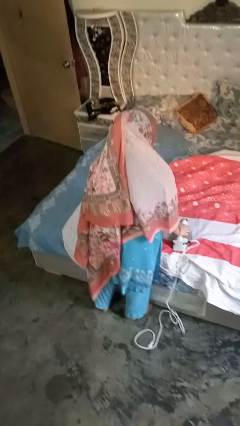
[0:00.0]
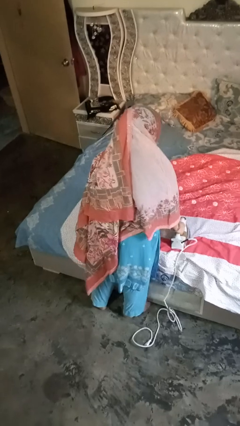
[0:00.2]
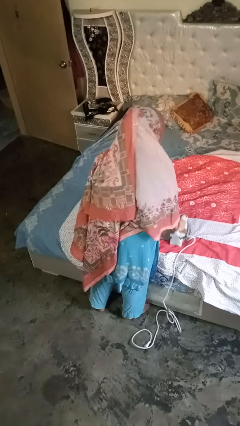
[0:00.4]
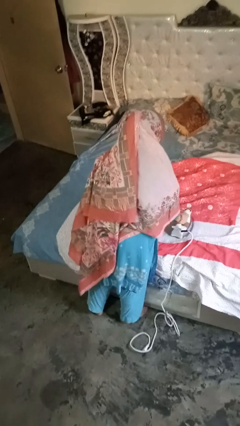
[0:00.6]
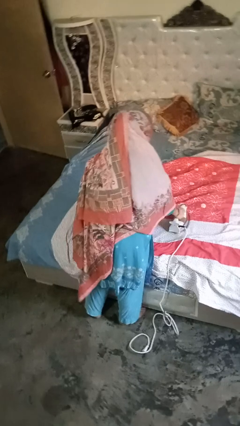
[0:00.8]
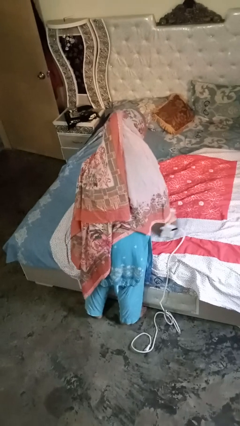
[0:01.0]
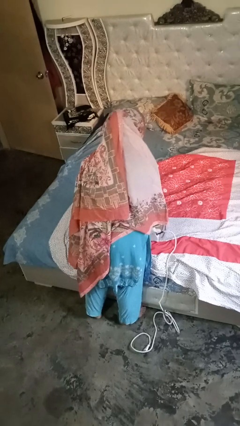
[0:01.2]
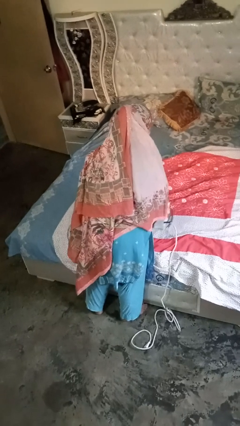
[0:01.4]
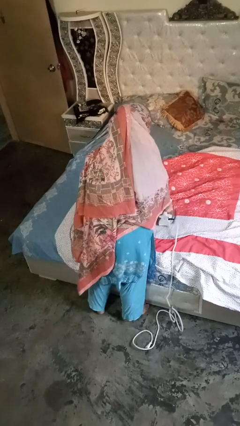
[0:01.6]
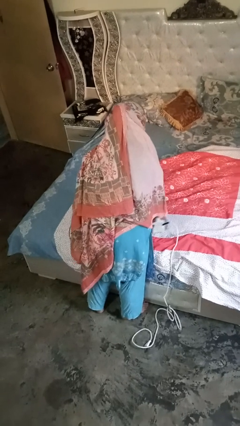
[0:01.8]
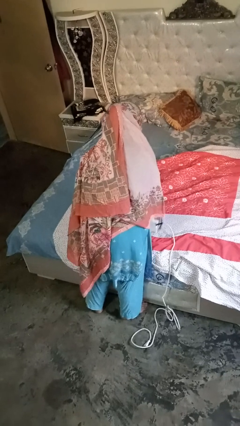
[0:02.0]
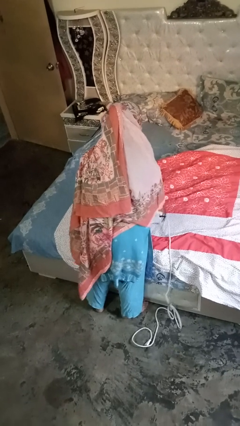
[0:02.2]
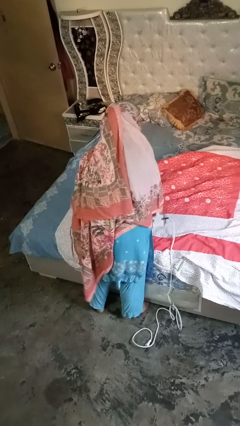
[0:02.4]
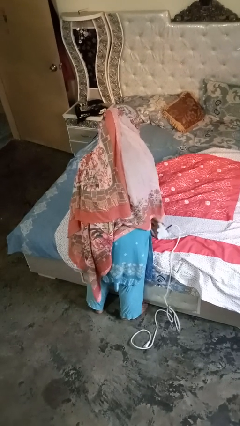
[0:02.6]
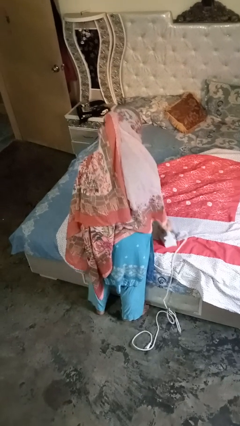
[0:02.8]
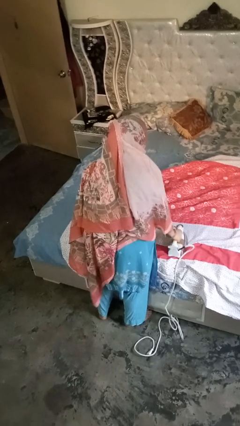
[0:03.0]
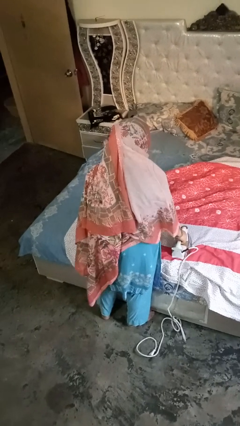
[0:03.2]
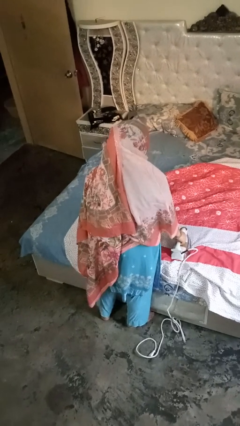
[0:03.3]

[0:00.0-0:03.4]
person irons clothes

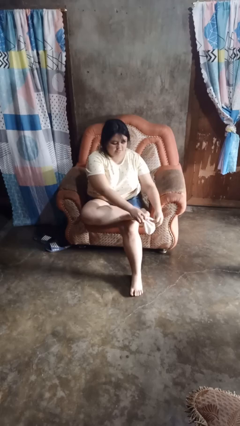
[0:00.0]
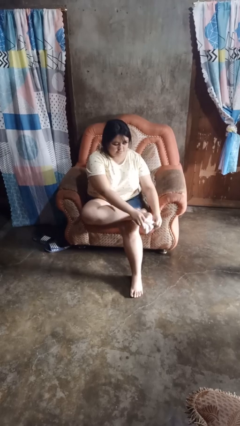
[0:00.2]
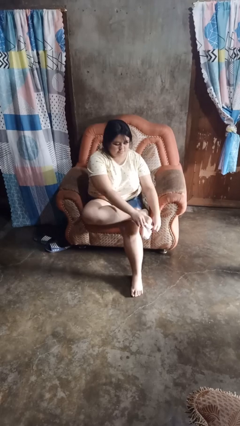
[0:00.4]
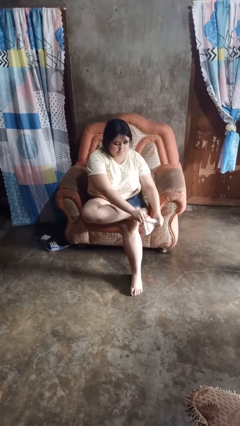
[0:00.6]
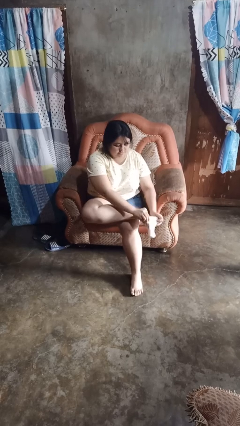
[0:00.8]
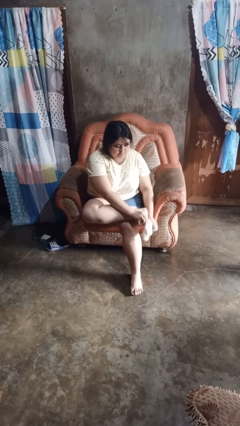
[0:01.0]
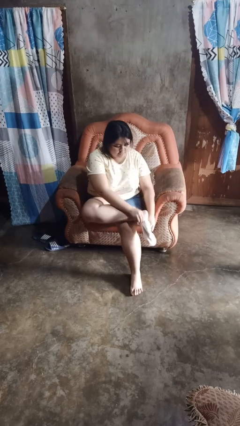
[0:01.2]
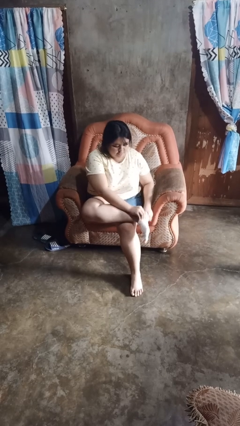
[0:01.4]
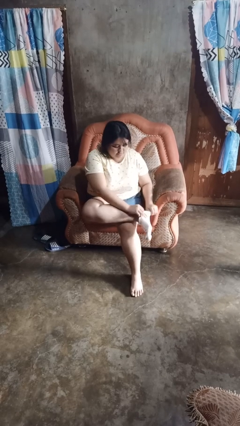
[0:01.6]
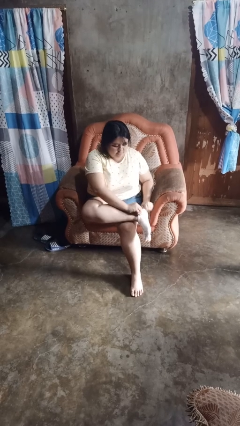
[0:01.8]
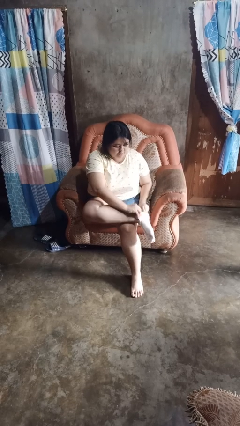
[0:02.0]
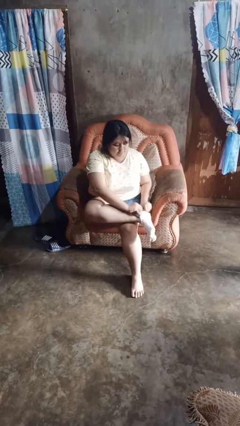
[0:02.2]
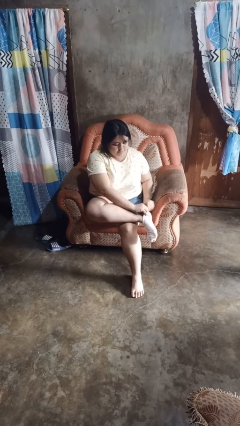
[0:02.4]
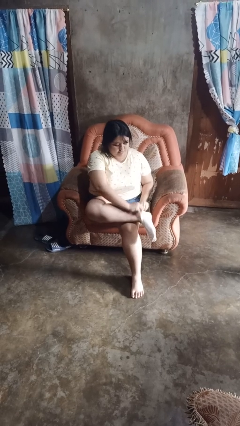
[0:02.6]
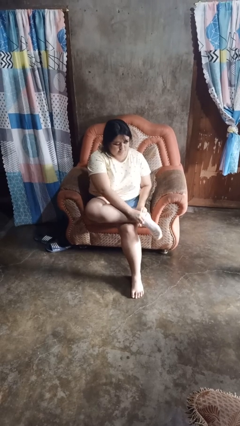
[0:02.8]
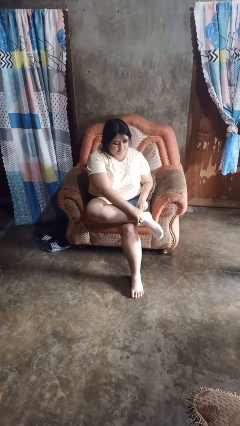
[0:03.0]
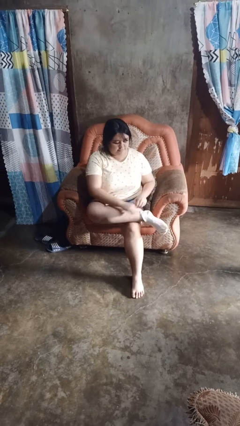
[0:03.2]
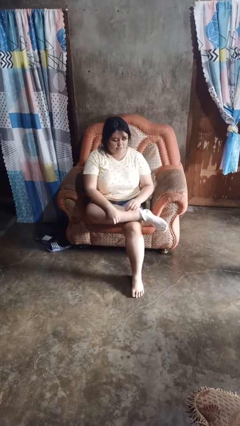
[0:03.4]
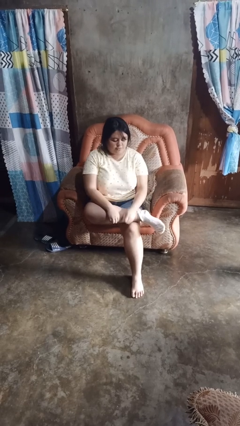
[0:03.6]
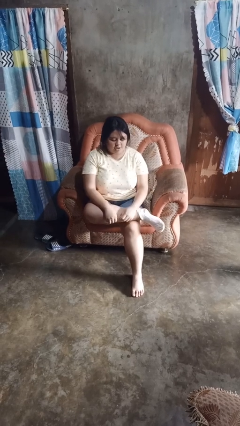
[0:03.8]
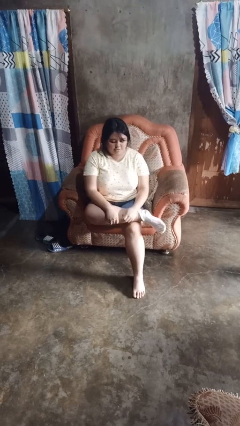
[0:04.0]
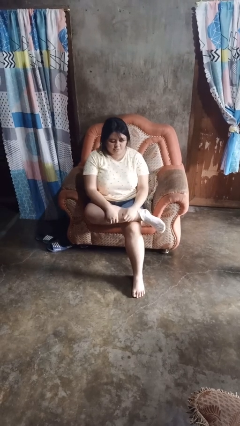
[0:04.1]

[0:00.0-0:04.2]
person puts on socks

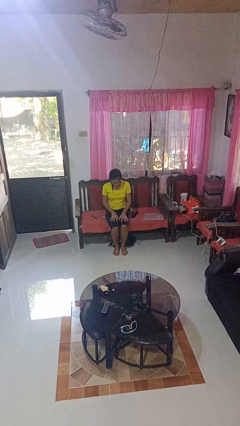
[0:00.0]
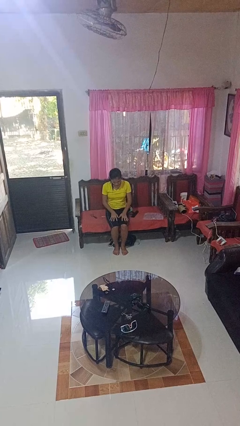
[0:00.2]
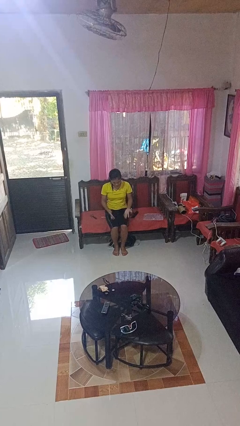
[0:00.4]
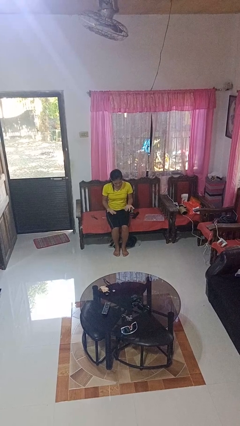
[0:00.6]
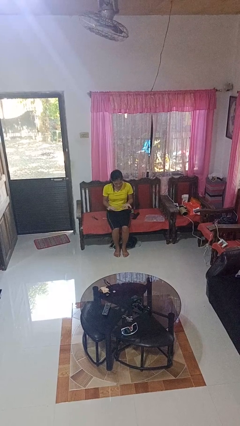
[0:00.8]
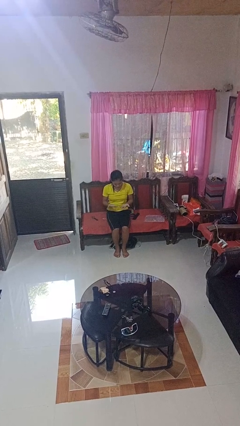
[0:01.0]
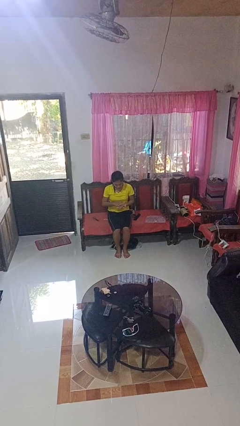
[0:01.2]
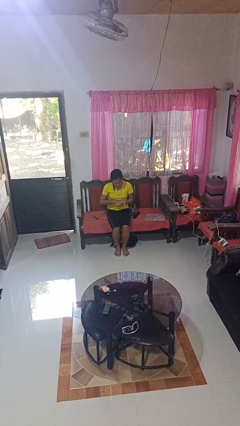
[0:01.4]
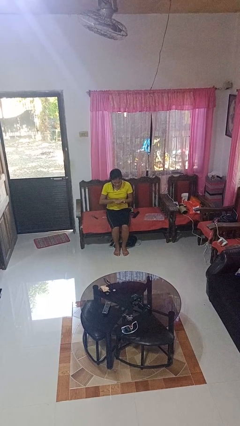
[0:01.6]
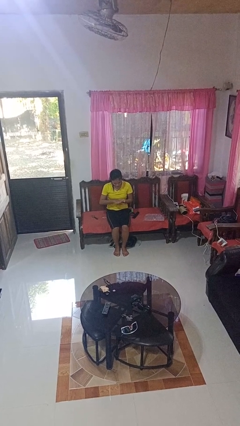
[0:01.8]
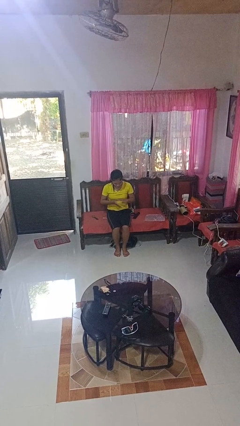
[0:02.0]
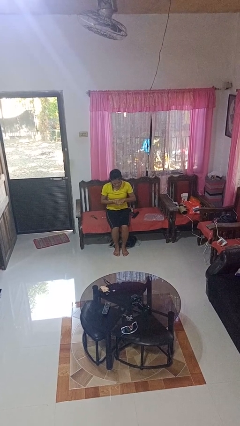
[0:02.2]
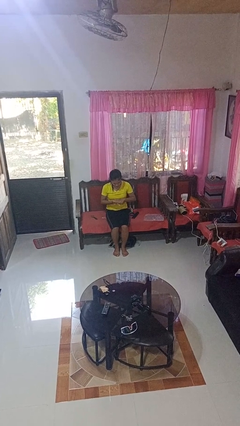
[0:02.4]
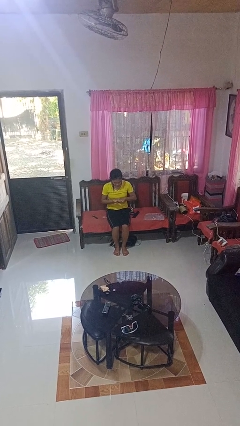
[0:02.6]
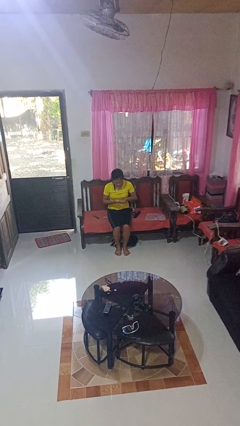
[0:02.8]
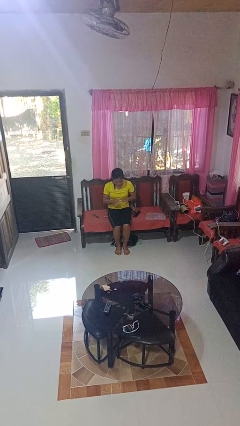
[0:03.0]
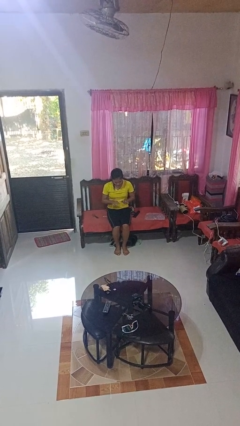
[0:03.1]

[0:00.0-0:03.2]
person looks at hands in lap

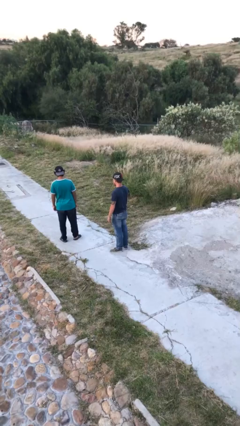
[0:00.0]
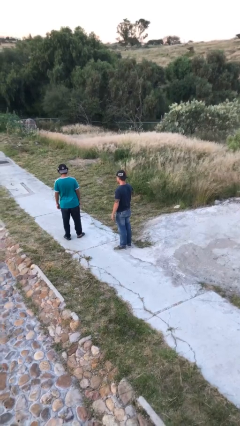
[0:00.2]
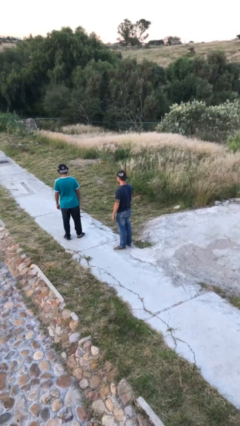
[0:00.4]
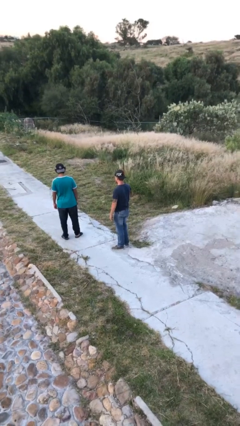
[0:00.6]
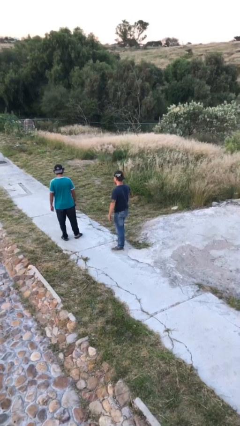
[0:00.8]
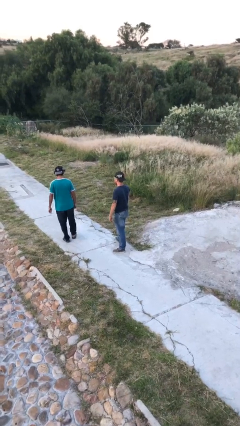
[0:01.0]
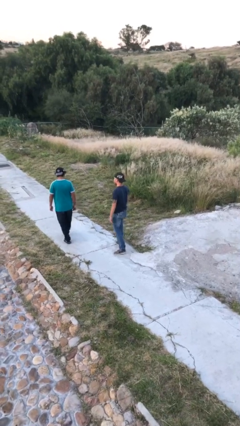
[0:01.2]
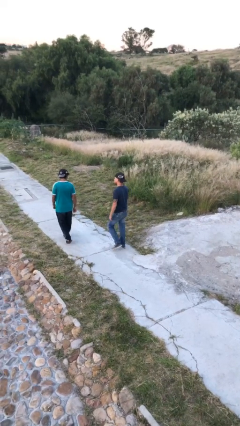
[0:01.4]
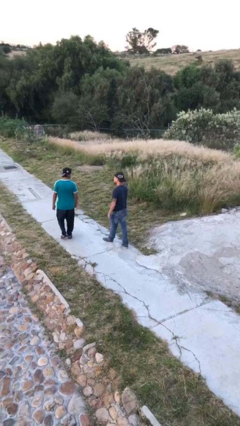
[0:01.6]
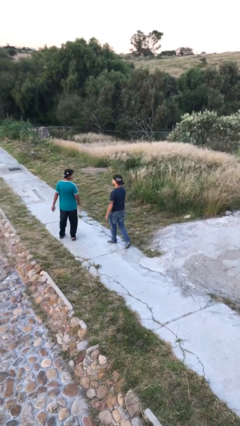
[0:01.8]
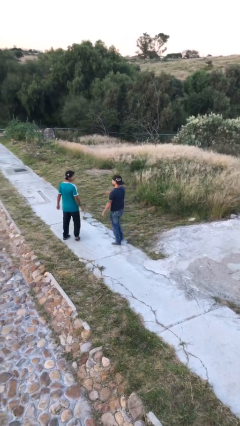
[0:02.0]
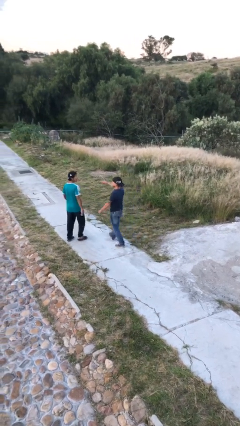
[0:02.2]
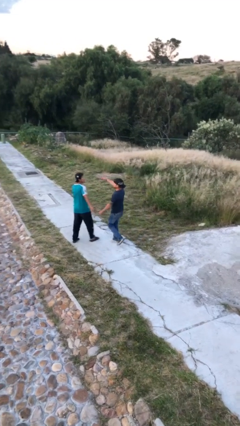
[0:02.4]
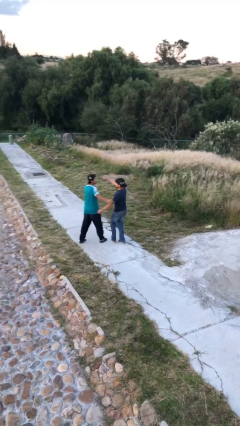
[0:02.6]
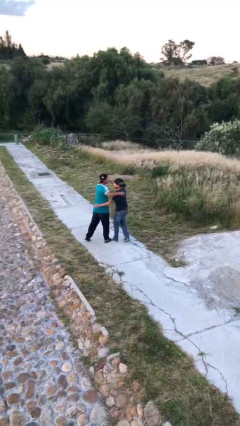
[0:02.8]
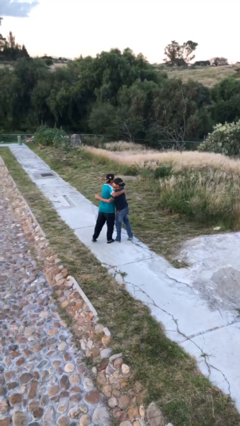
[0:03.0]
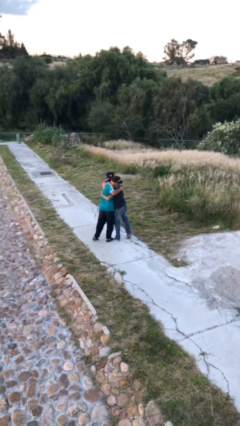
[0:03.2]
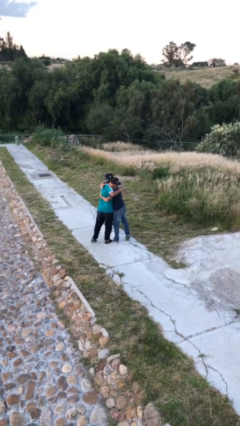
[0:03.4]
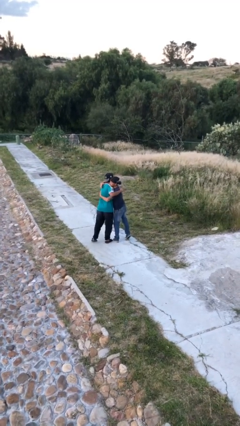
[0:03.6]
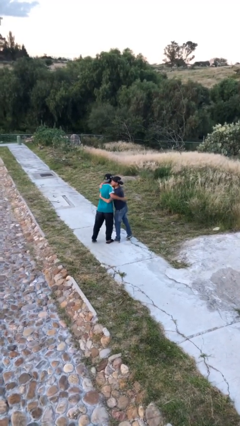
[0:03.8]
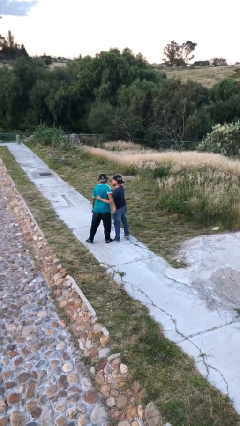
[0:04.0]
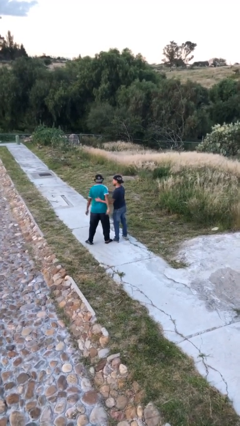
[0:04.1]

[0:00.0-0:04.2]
person embraces person

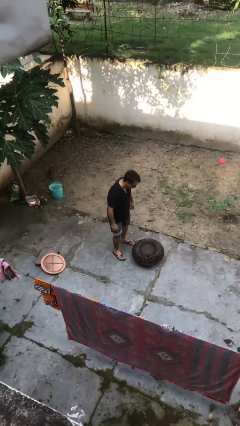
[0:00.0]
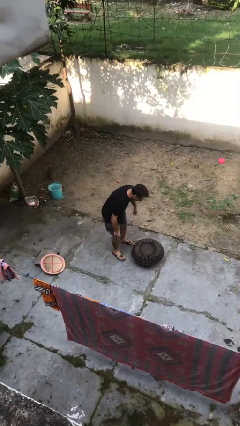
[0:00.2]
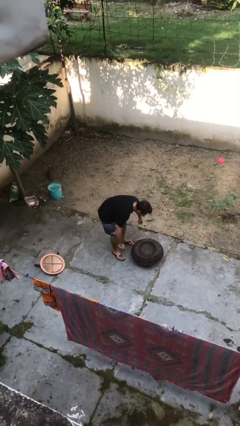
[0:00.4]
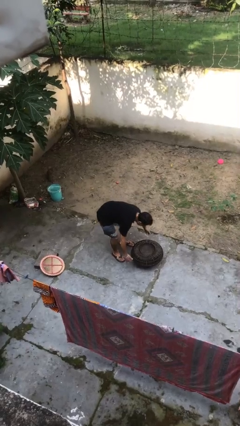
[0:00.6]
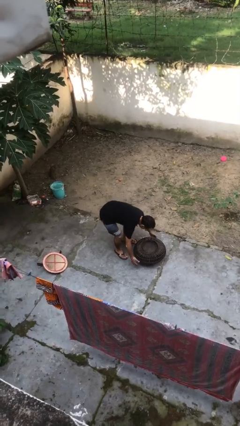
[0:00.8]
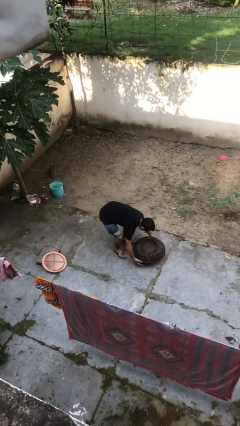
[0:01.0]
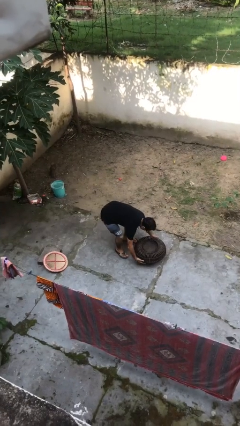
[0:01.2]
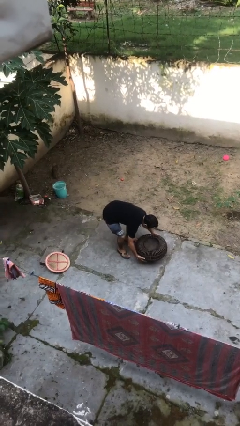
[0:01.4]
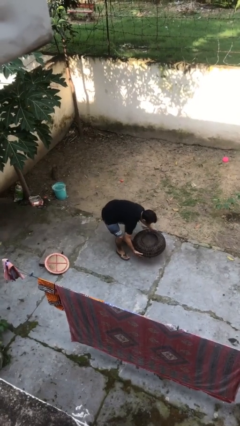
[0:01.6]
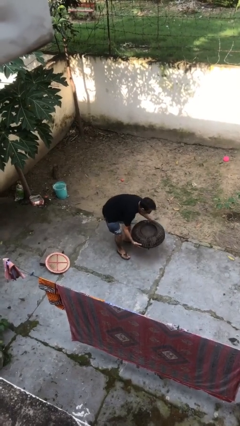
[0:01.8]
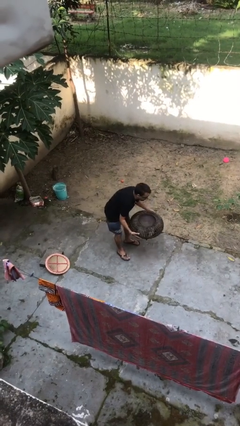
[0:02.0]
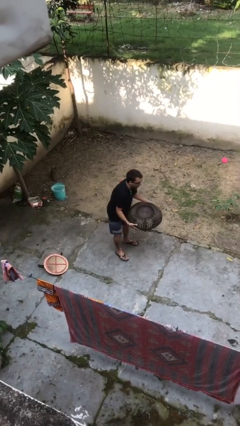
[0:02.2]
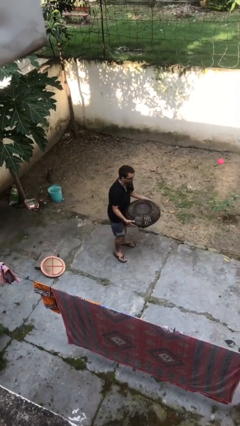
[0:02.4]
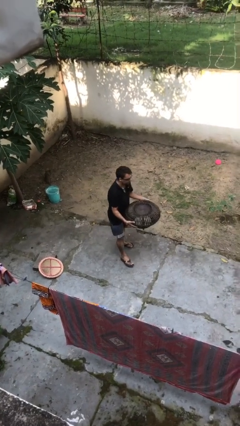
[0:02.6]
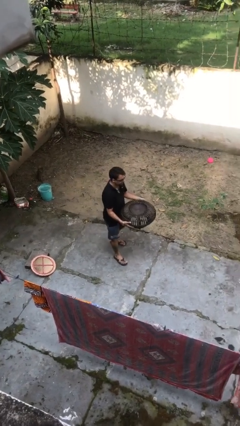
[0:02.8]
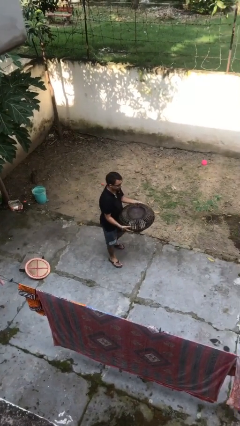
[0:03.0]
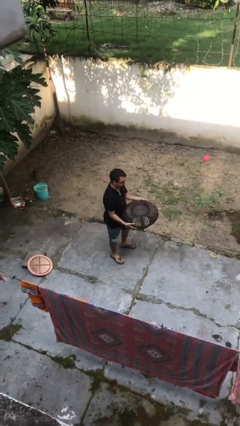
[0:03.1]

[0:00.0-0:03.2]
person picks up object from floor
